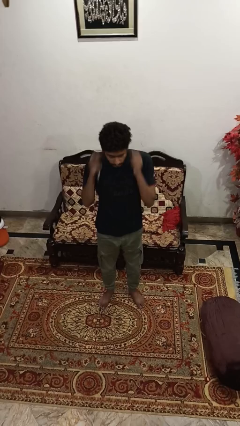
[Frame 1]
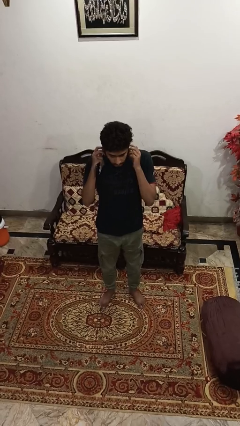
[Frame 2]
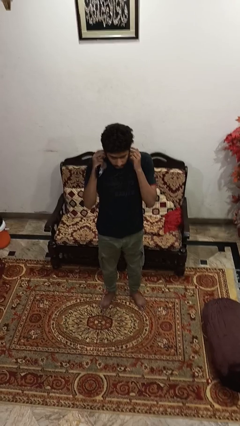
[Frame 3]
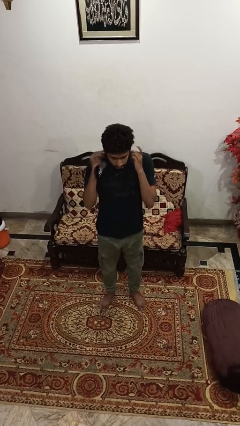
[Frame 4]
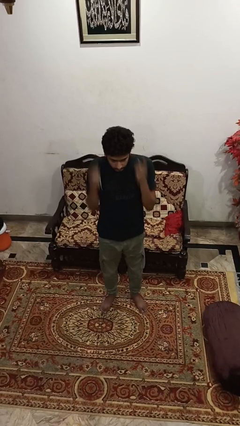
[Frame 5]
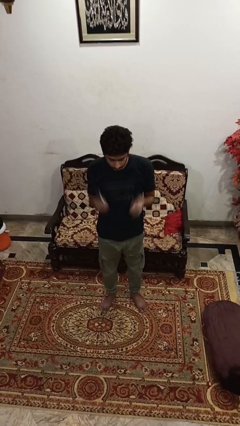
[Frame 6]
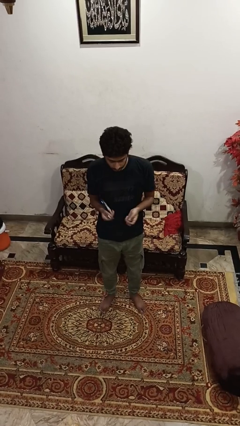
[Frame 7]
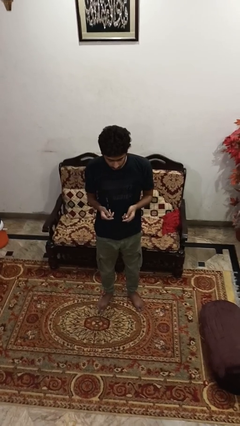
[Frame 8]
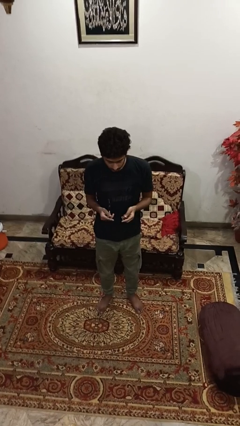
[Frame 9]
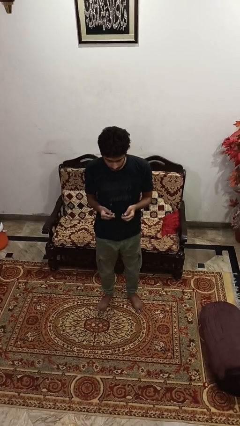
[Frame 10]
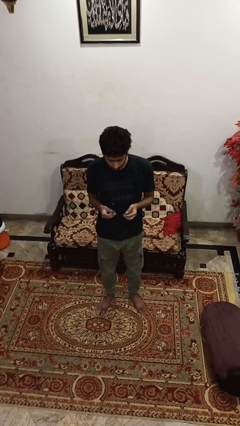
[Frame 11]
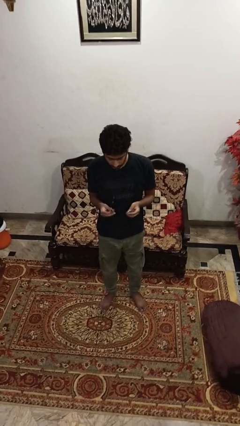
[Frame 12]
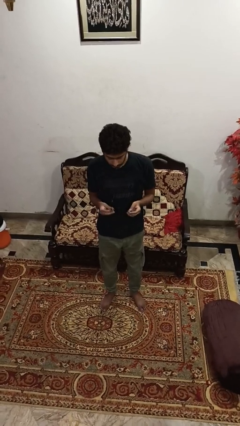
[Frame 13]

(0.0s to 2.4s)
person takes off headphones

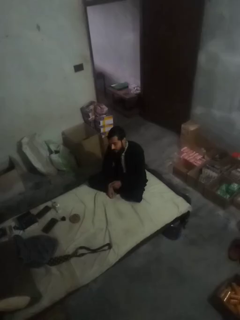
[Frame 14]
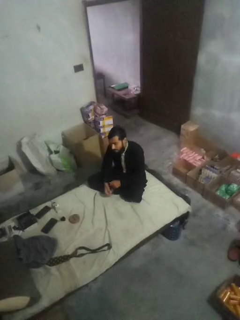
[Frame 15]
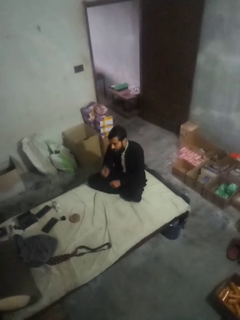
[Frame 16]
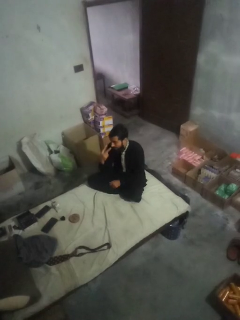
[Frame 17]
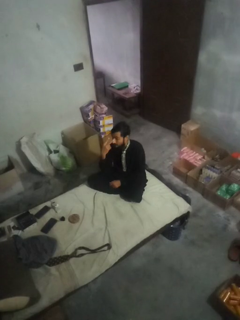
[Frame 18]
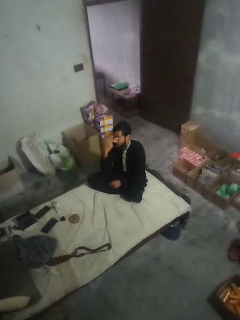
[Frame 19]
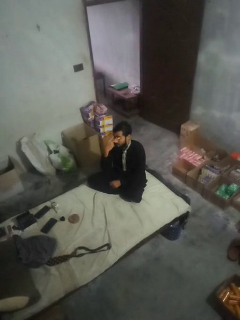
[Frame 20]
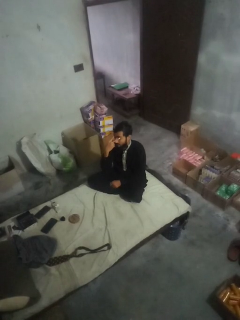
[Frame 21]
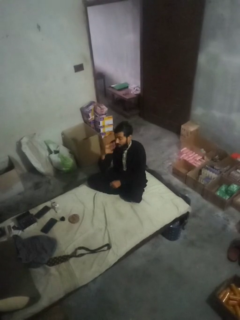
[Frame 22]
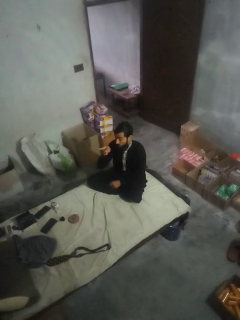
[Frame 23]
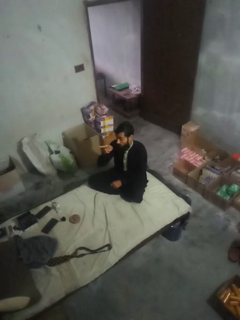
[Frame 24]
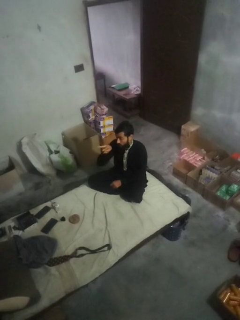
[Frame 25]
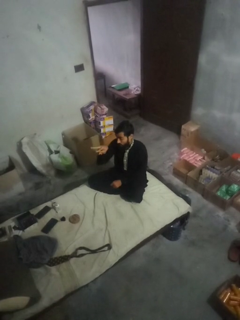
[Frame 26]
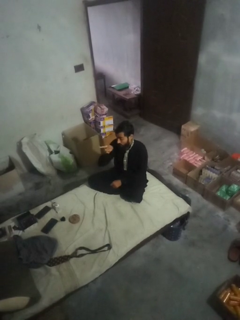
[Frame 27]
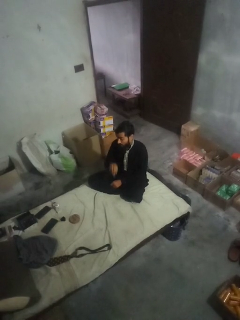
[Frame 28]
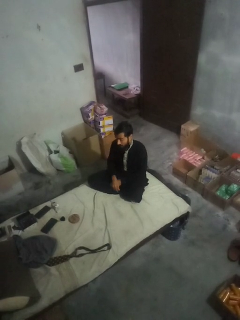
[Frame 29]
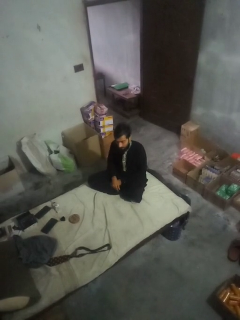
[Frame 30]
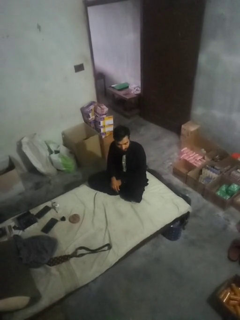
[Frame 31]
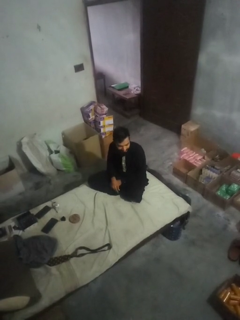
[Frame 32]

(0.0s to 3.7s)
person gestures watch closely

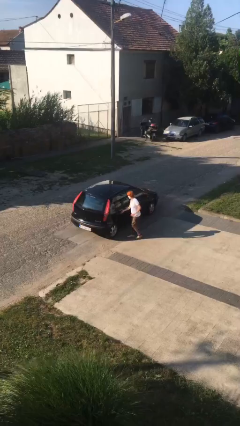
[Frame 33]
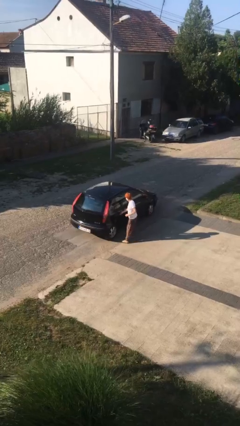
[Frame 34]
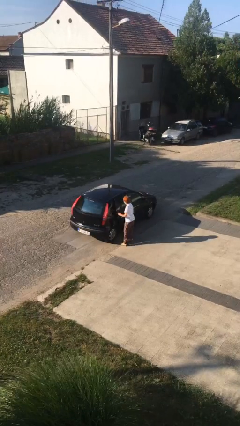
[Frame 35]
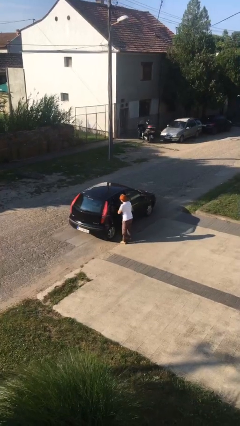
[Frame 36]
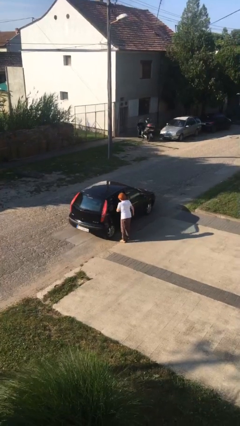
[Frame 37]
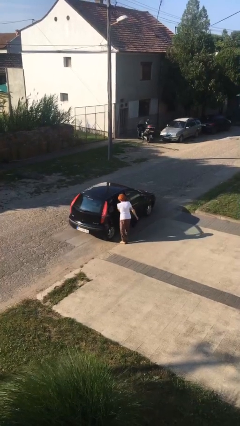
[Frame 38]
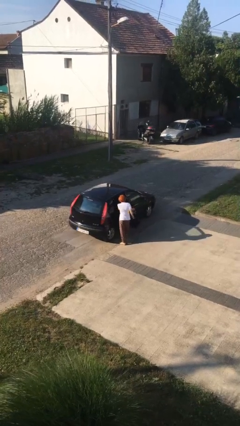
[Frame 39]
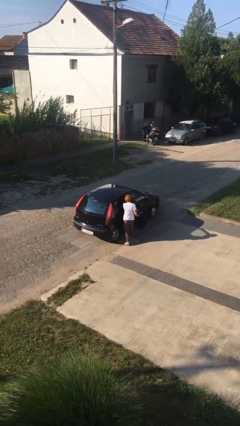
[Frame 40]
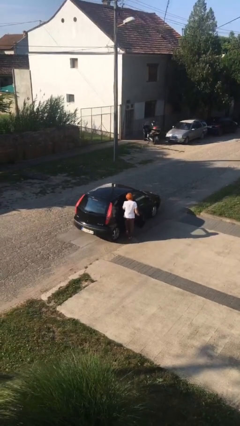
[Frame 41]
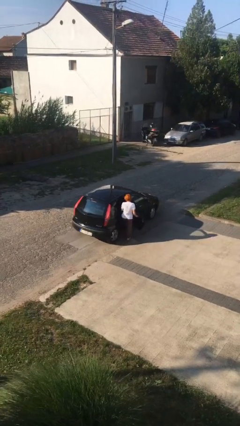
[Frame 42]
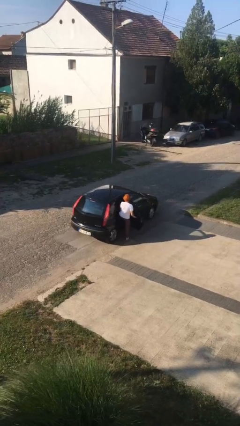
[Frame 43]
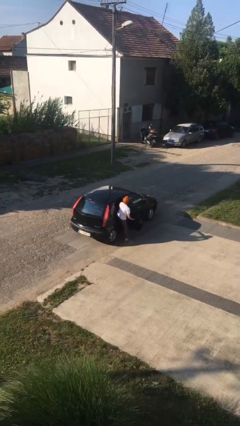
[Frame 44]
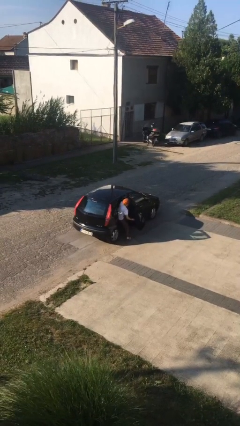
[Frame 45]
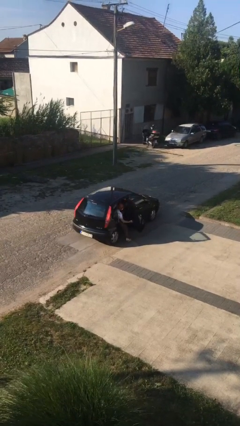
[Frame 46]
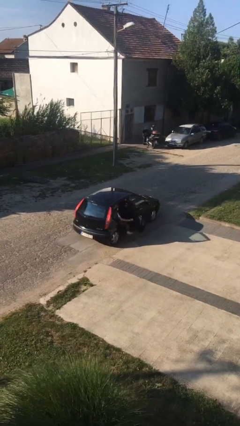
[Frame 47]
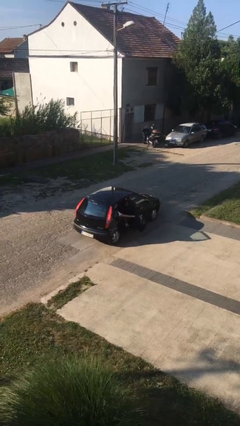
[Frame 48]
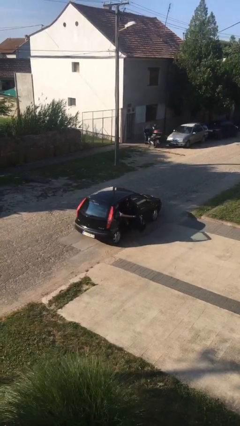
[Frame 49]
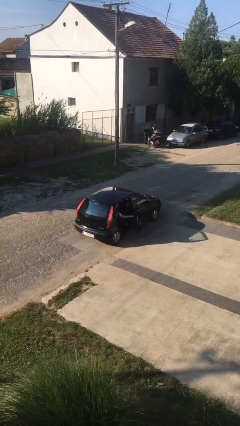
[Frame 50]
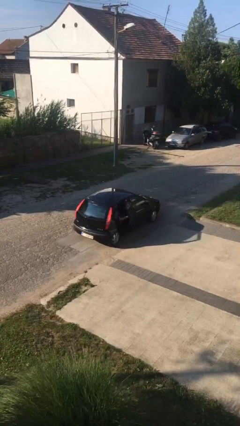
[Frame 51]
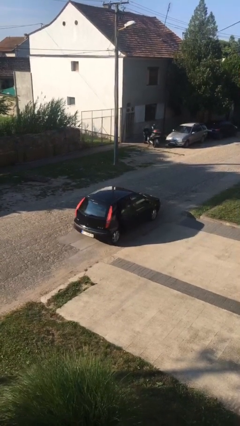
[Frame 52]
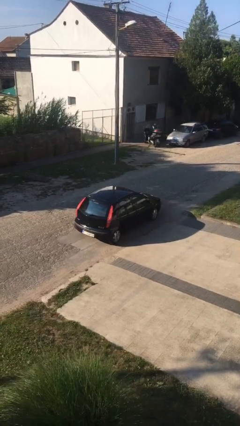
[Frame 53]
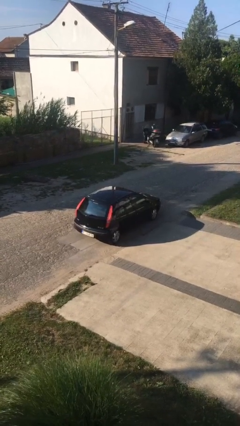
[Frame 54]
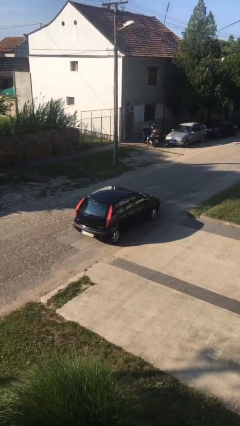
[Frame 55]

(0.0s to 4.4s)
car picks up person

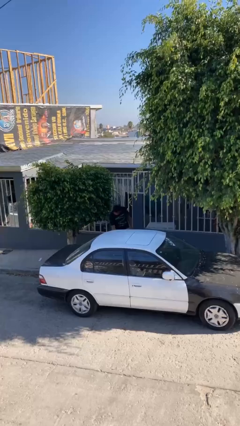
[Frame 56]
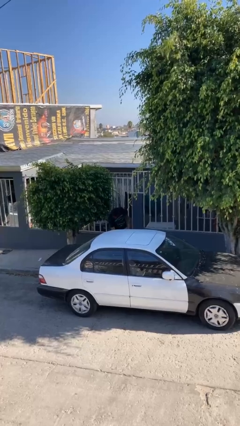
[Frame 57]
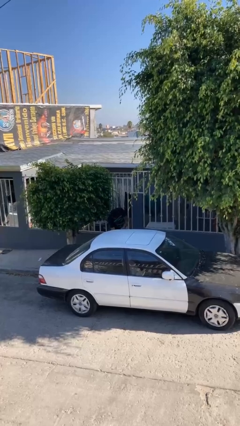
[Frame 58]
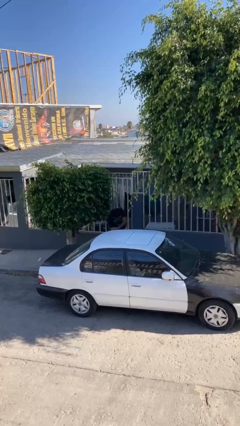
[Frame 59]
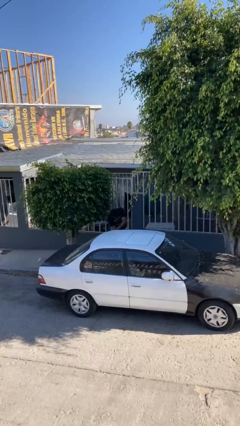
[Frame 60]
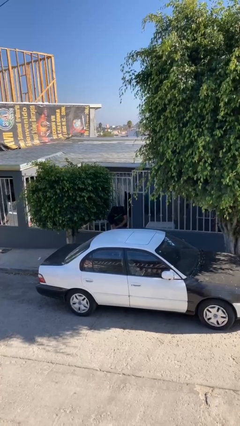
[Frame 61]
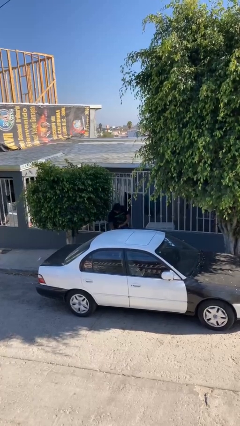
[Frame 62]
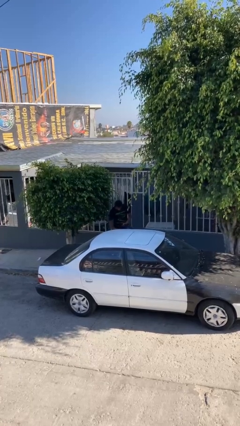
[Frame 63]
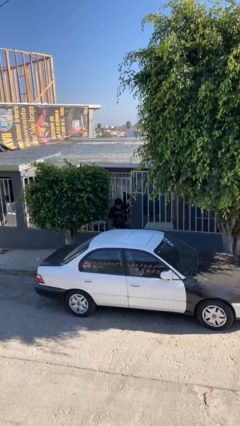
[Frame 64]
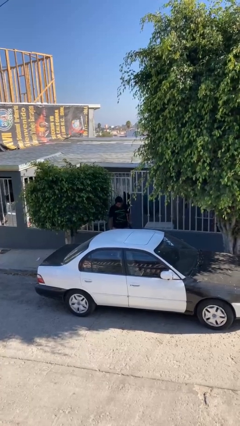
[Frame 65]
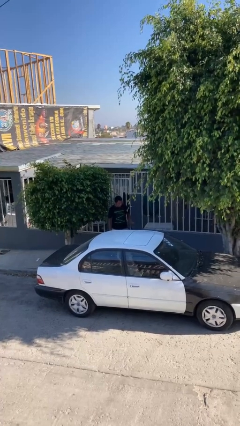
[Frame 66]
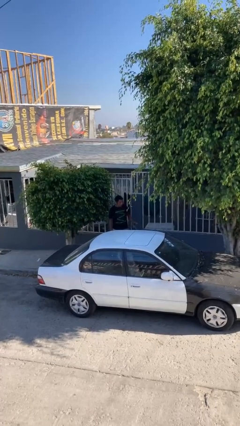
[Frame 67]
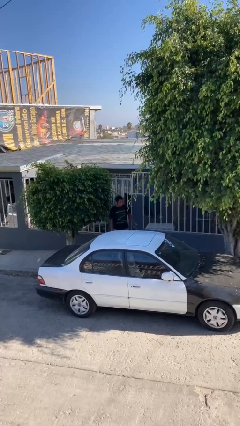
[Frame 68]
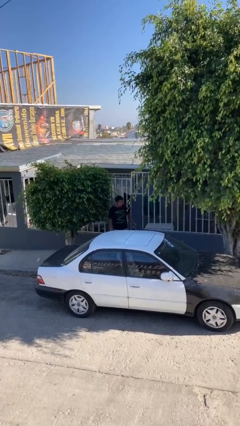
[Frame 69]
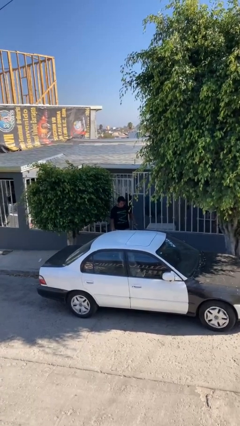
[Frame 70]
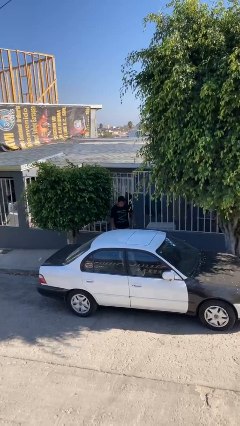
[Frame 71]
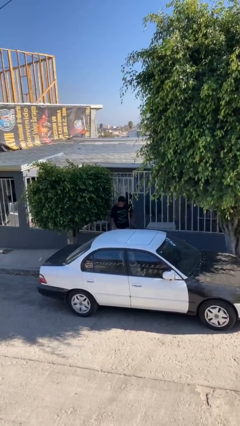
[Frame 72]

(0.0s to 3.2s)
person opens car door

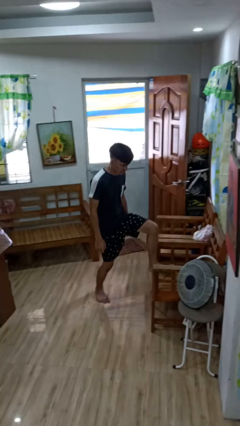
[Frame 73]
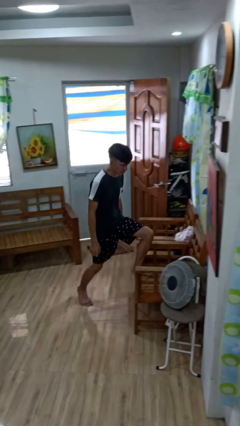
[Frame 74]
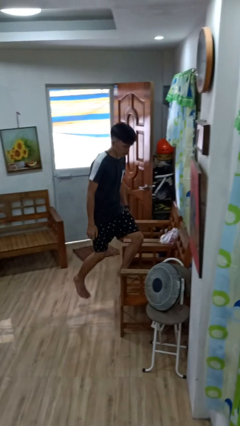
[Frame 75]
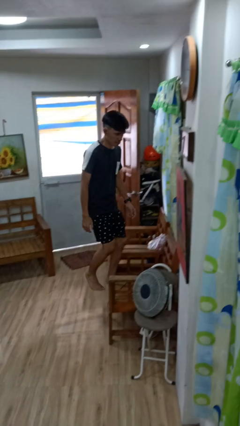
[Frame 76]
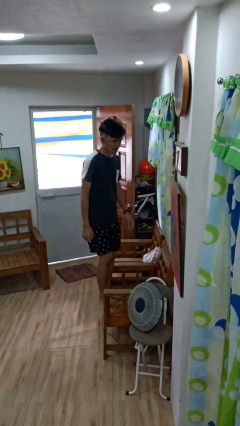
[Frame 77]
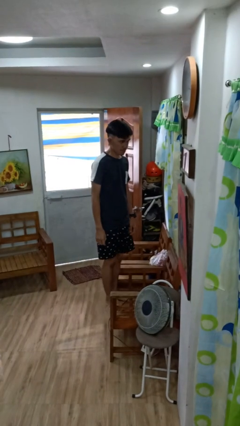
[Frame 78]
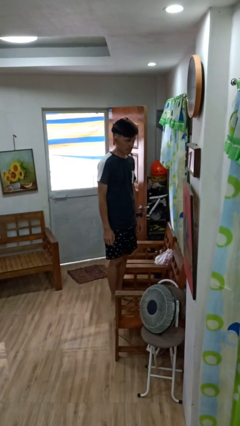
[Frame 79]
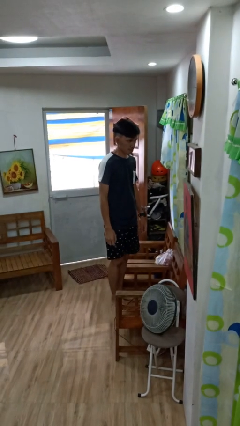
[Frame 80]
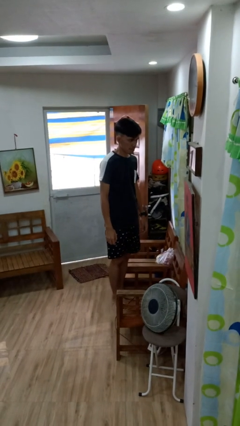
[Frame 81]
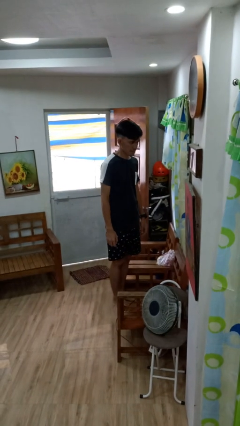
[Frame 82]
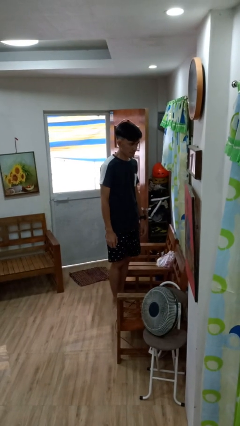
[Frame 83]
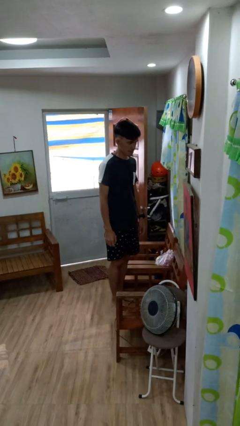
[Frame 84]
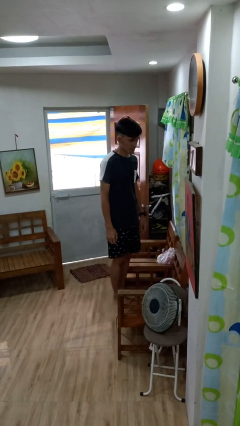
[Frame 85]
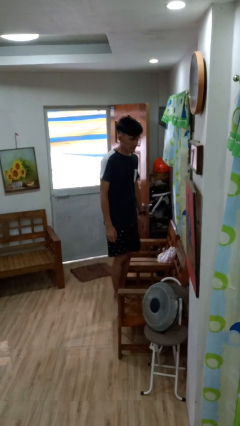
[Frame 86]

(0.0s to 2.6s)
person climbs on chair

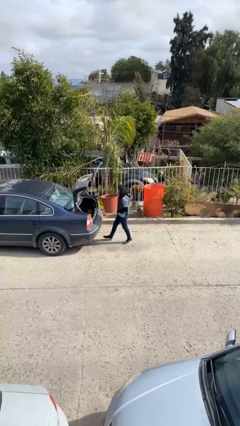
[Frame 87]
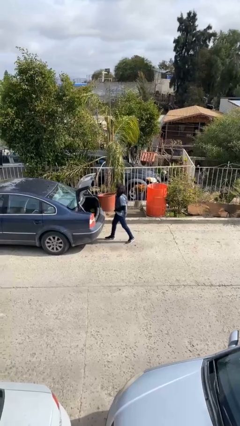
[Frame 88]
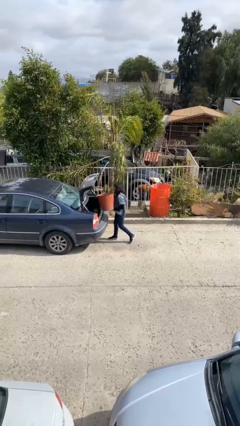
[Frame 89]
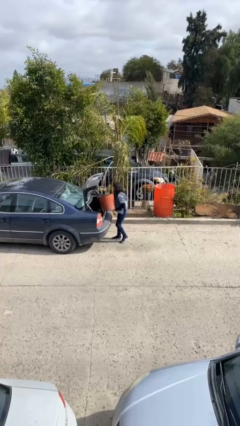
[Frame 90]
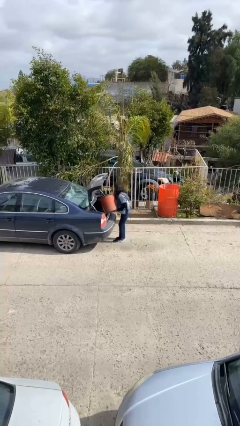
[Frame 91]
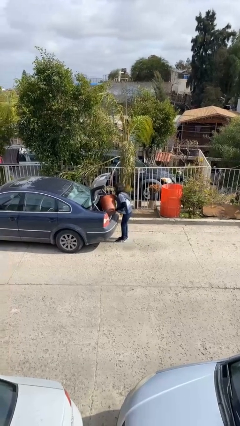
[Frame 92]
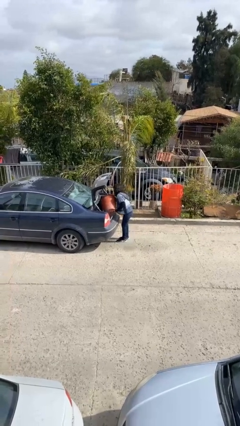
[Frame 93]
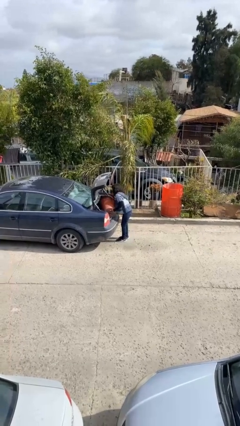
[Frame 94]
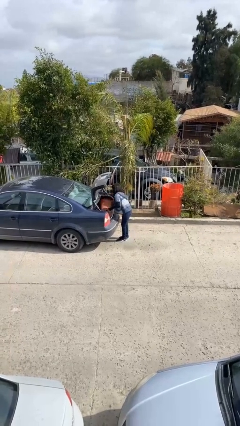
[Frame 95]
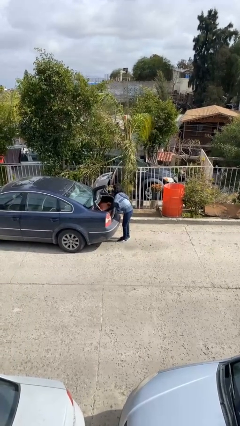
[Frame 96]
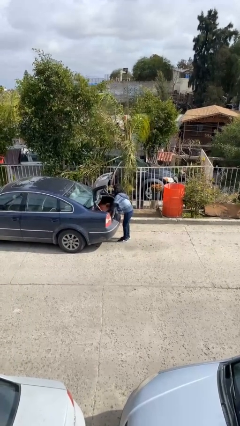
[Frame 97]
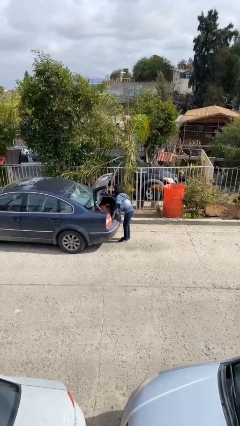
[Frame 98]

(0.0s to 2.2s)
person loads car
